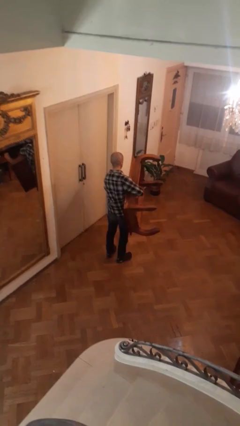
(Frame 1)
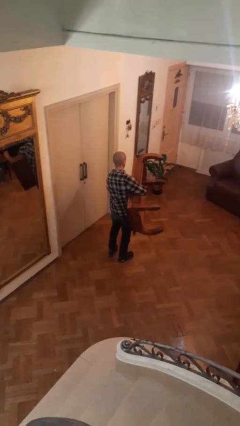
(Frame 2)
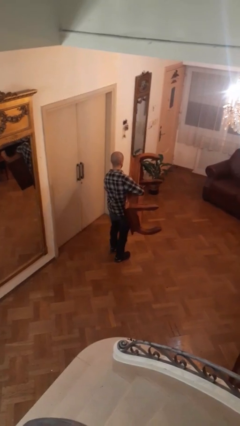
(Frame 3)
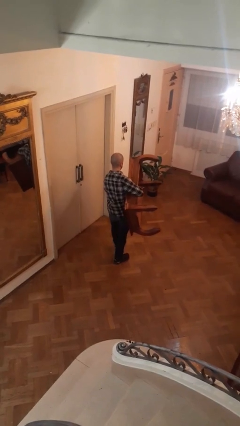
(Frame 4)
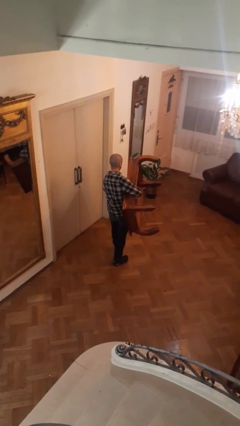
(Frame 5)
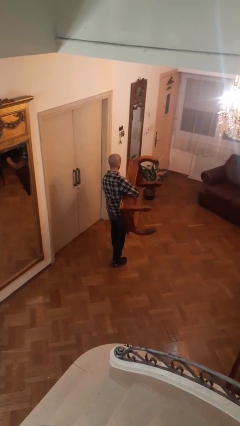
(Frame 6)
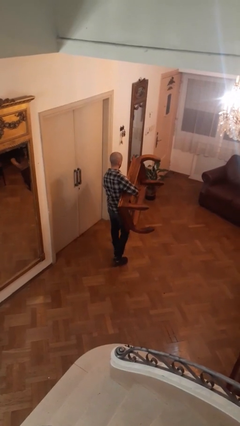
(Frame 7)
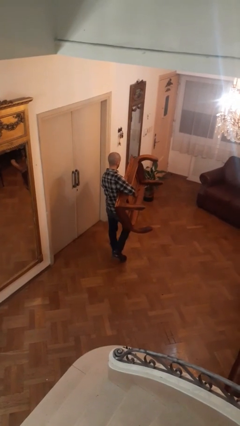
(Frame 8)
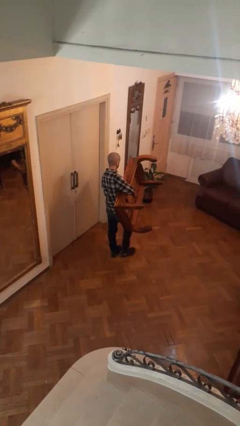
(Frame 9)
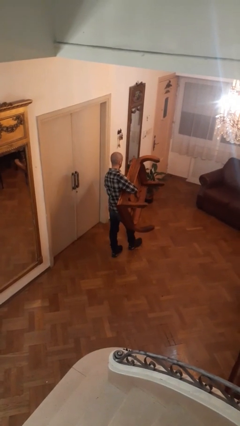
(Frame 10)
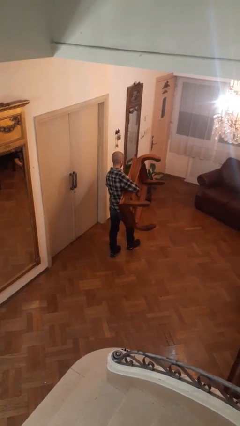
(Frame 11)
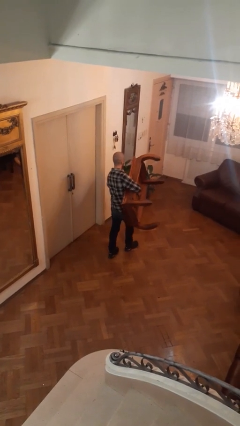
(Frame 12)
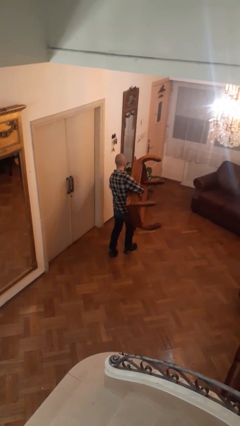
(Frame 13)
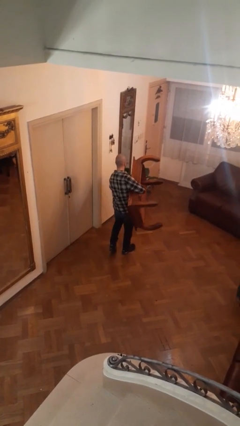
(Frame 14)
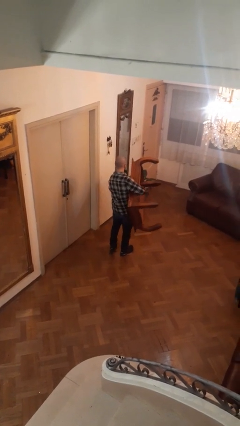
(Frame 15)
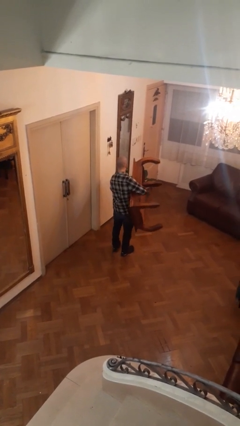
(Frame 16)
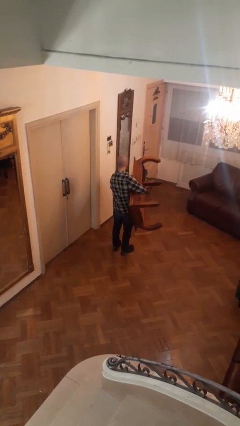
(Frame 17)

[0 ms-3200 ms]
person carries furniture

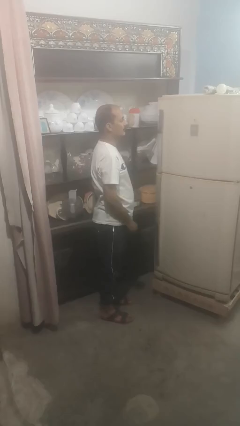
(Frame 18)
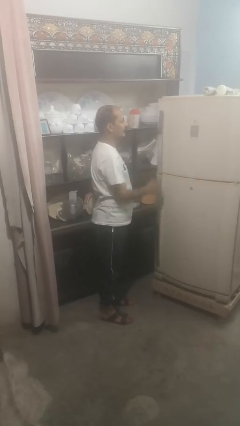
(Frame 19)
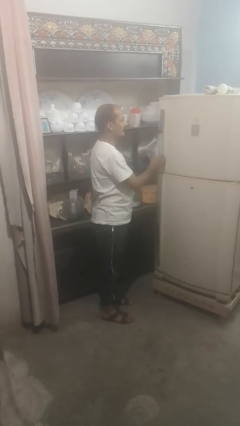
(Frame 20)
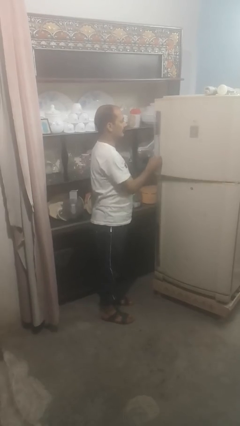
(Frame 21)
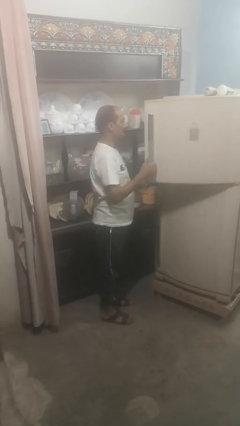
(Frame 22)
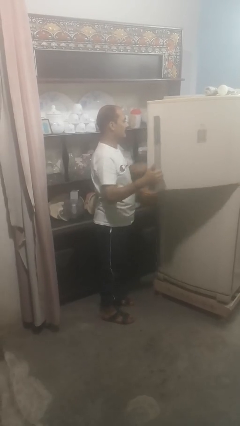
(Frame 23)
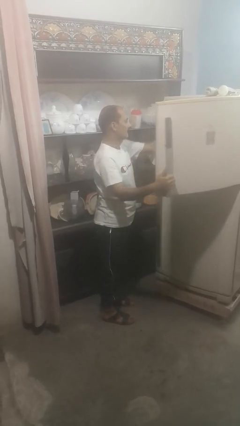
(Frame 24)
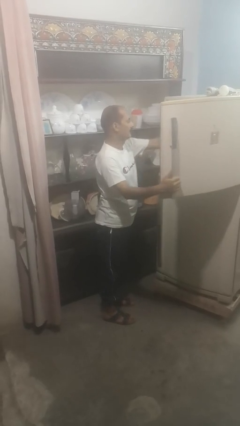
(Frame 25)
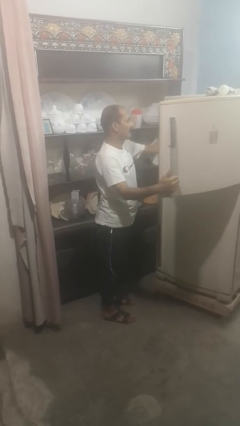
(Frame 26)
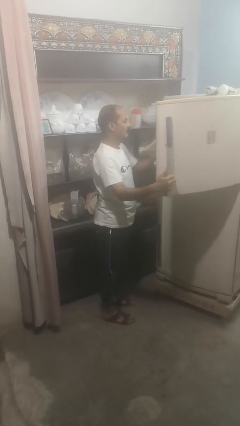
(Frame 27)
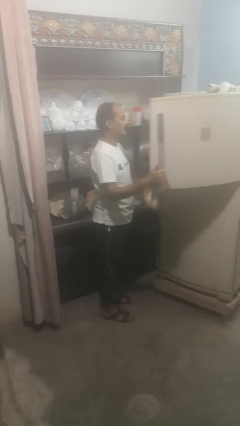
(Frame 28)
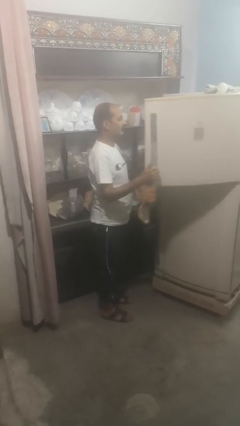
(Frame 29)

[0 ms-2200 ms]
person takes object from refrigerator

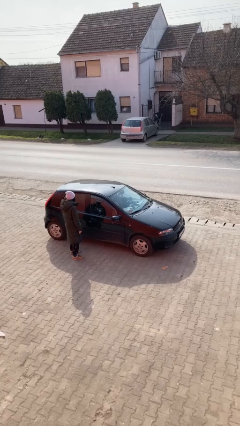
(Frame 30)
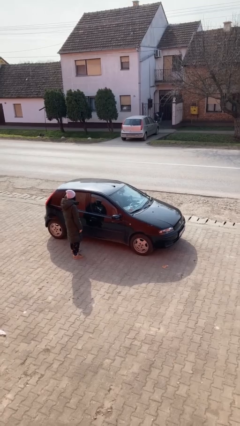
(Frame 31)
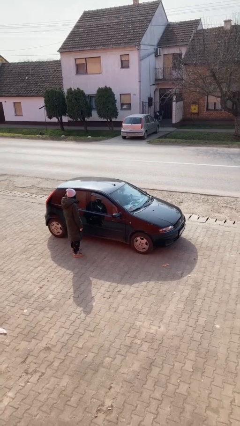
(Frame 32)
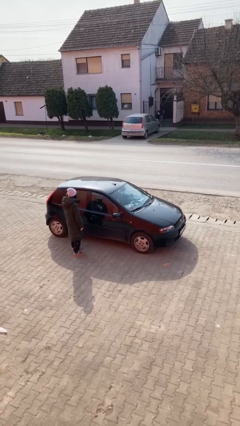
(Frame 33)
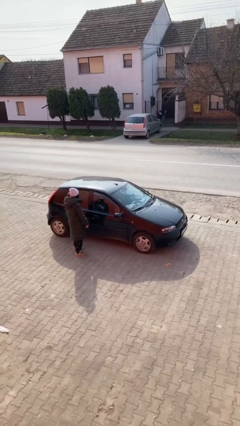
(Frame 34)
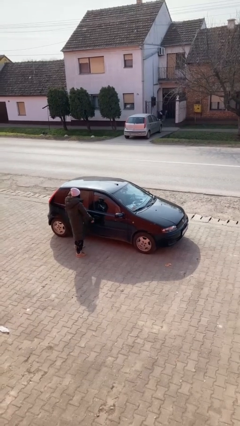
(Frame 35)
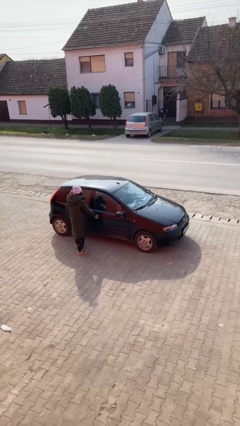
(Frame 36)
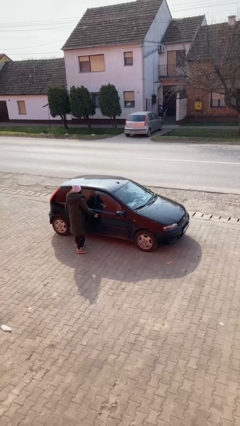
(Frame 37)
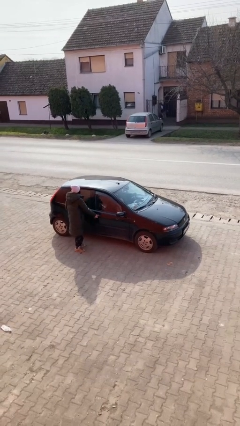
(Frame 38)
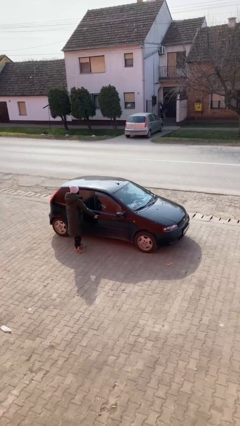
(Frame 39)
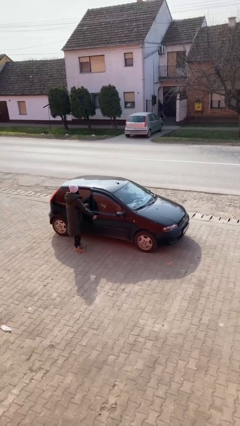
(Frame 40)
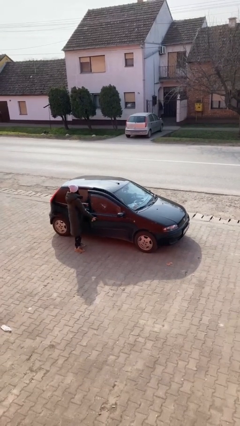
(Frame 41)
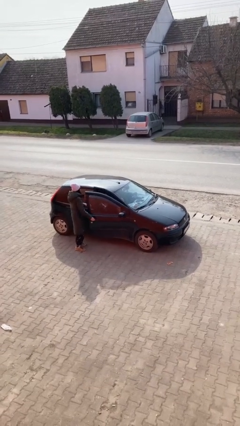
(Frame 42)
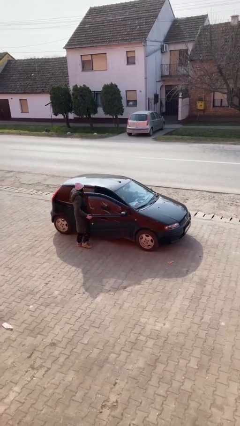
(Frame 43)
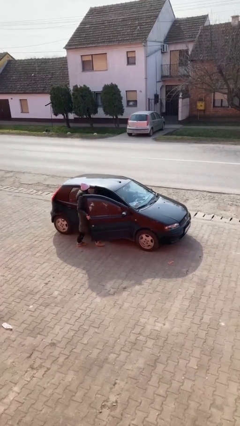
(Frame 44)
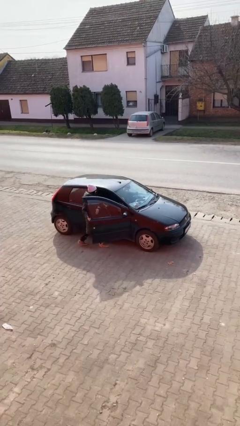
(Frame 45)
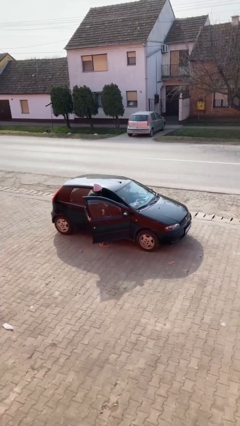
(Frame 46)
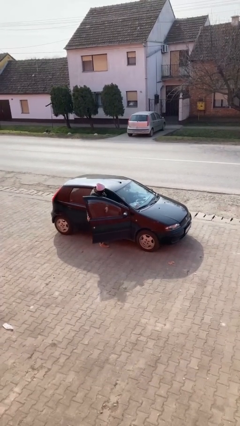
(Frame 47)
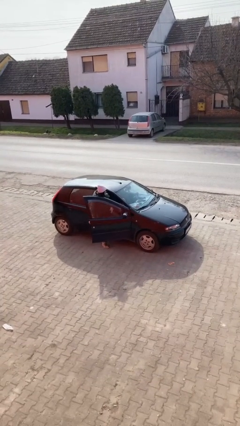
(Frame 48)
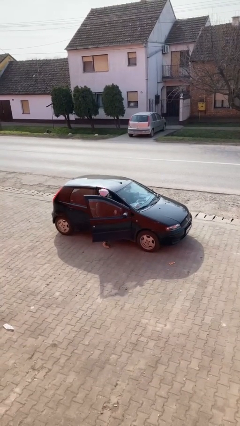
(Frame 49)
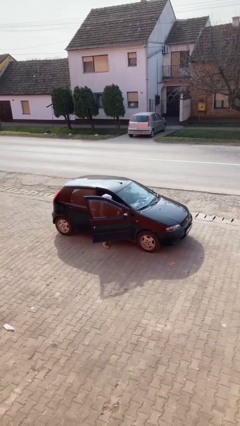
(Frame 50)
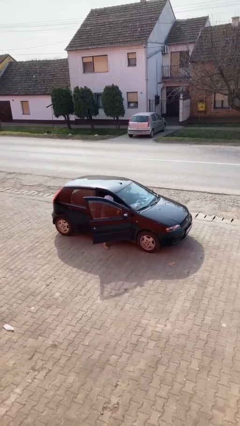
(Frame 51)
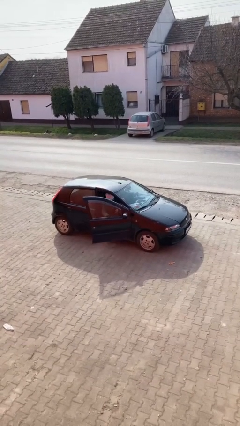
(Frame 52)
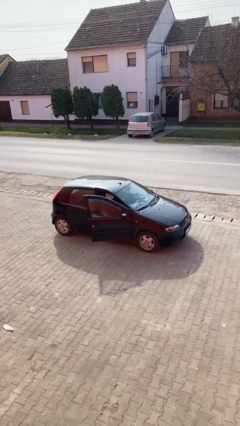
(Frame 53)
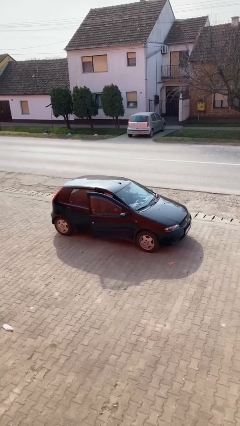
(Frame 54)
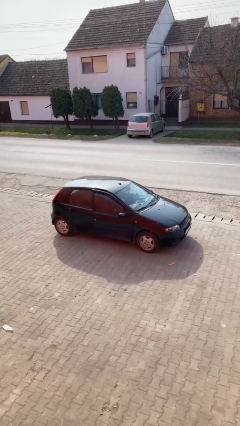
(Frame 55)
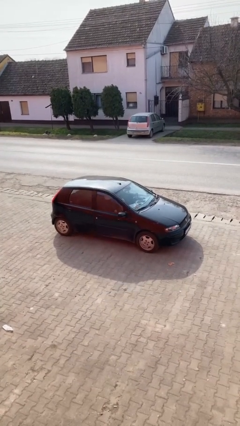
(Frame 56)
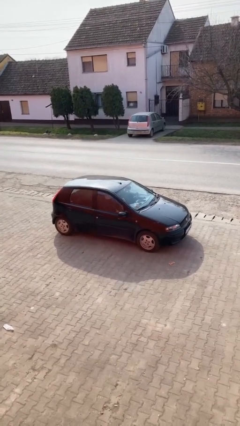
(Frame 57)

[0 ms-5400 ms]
car picks up person

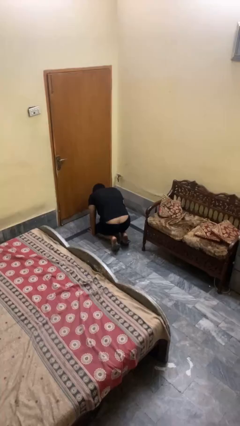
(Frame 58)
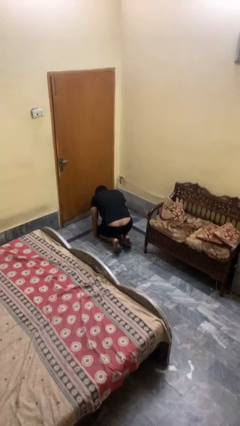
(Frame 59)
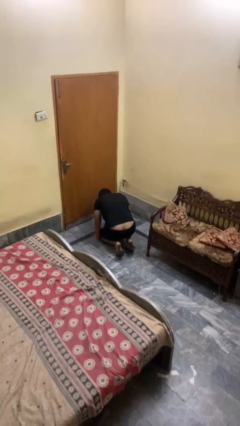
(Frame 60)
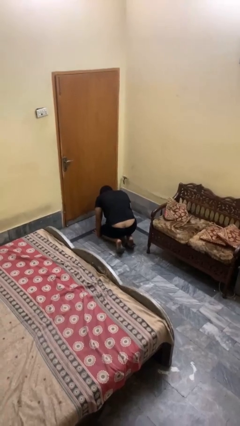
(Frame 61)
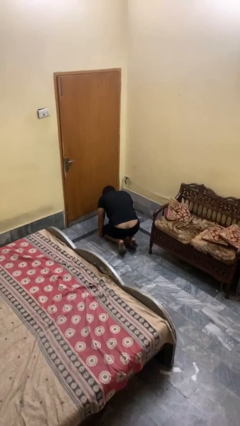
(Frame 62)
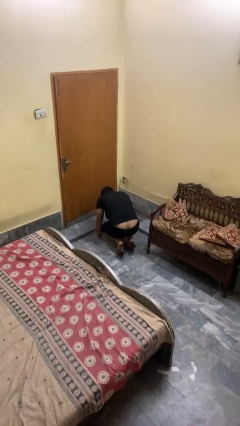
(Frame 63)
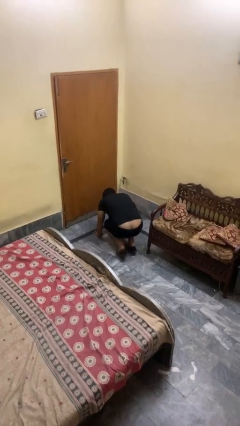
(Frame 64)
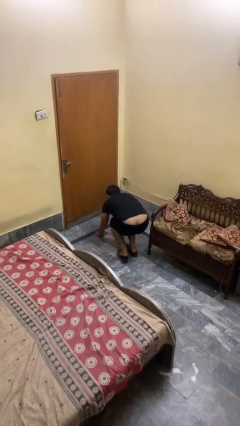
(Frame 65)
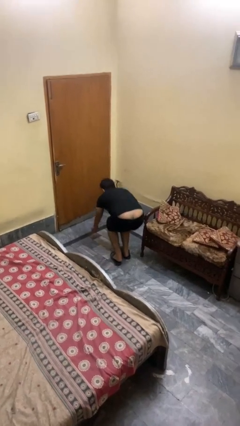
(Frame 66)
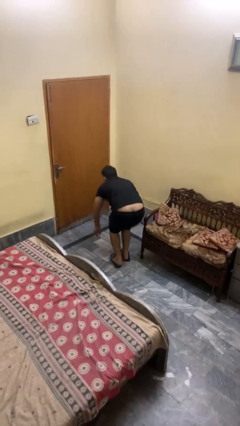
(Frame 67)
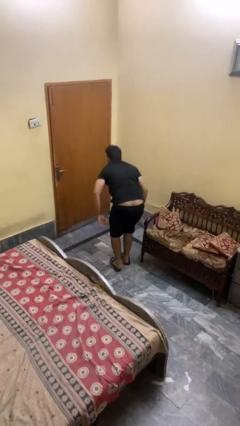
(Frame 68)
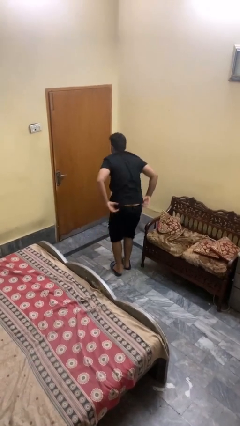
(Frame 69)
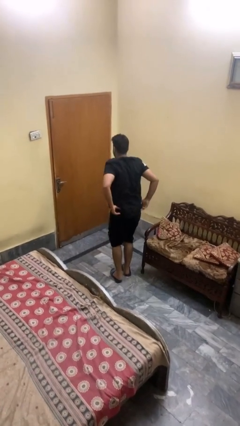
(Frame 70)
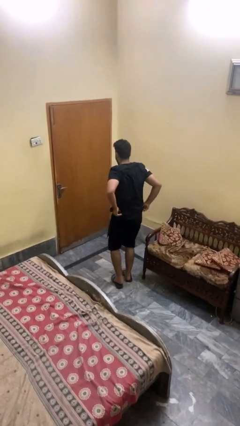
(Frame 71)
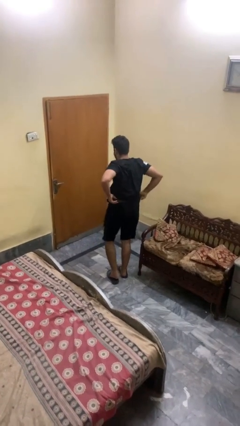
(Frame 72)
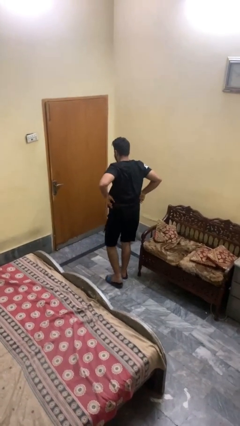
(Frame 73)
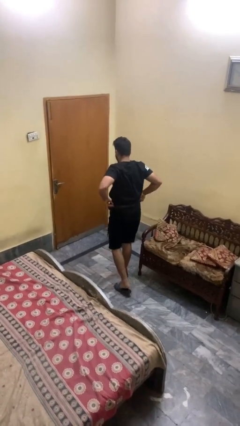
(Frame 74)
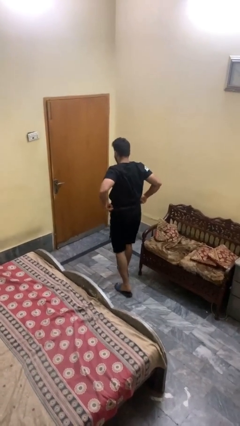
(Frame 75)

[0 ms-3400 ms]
person stands up from floor

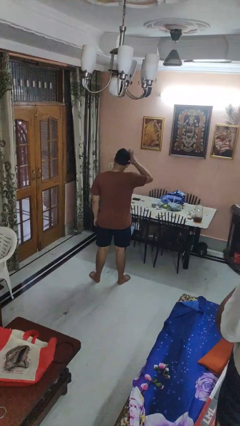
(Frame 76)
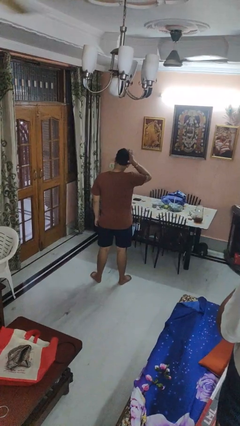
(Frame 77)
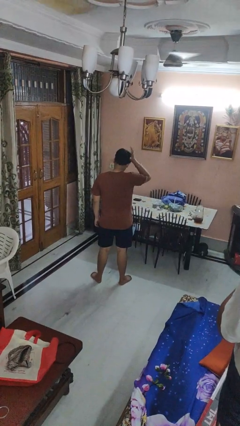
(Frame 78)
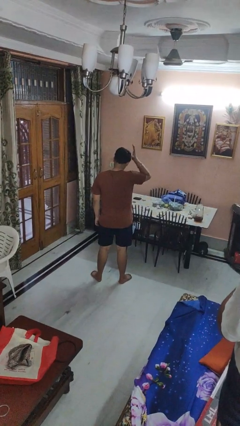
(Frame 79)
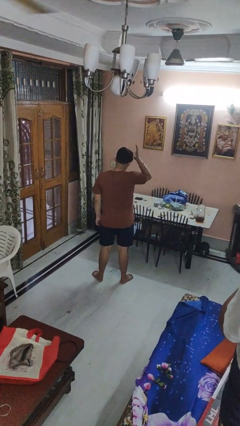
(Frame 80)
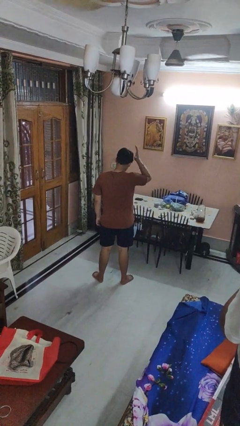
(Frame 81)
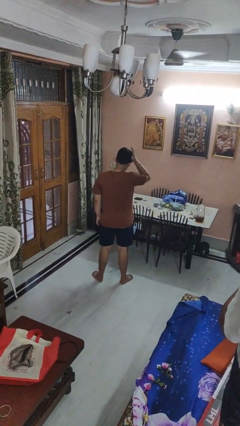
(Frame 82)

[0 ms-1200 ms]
person pats head

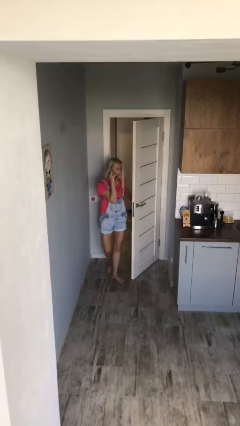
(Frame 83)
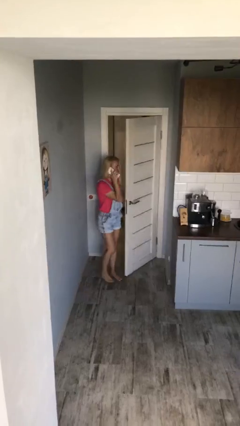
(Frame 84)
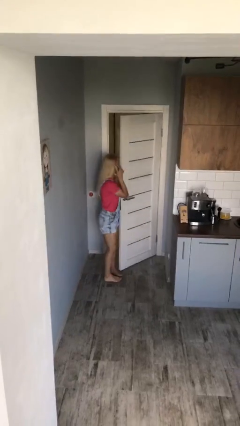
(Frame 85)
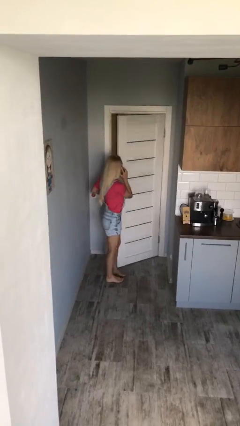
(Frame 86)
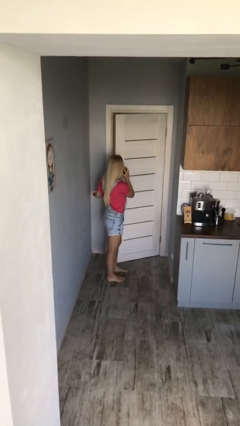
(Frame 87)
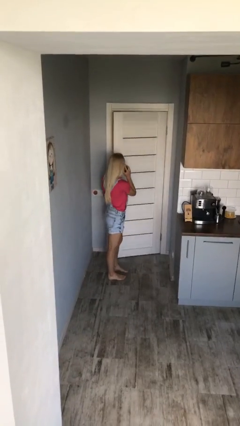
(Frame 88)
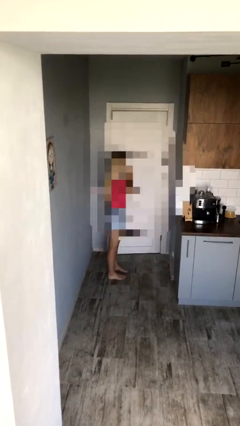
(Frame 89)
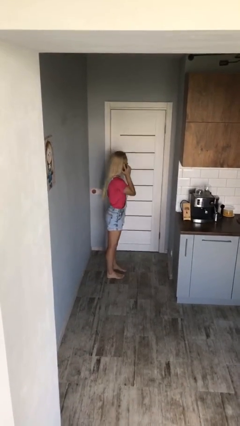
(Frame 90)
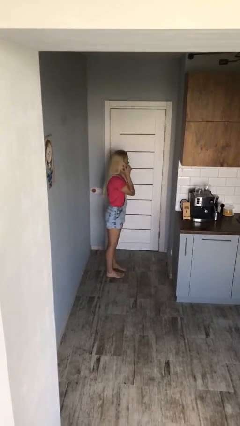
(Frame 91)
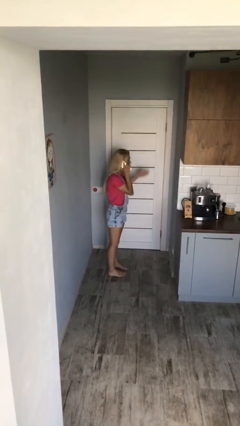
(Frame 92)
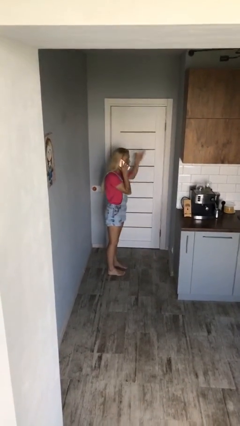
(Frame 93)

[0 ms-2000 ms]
person closes facility door

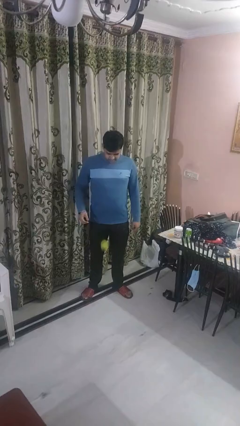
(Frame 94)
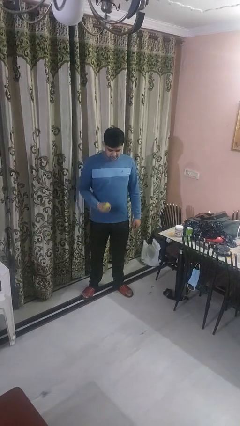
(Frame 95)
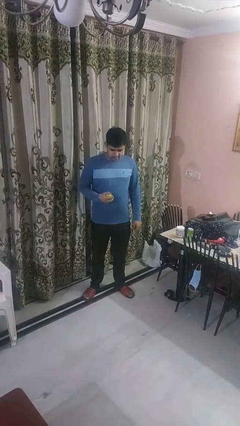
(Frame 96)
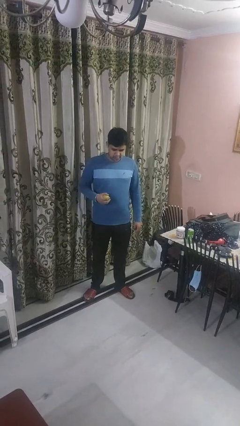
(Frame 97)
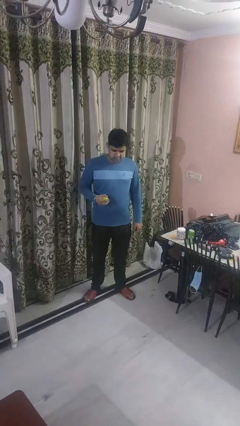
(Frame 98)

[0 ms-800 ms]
person bounces ball on floor
